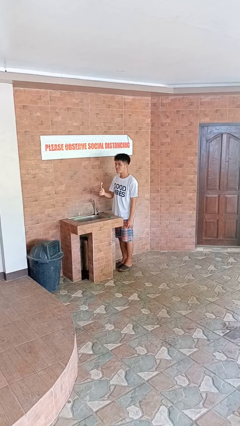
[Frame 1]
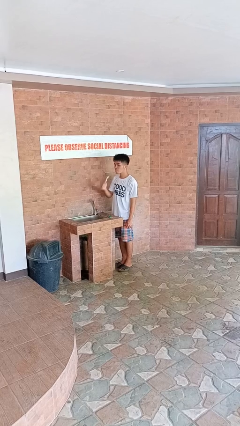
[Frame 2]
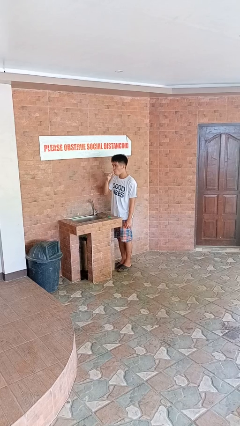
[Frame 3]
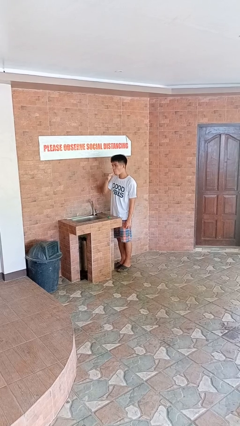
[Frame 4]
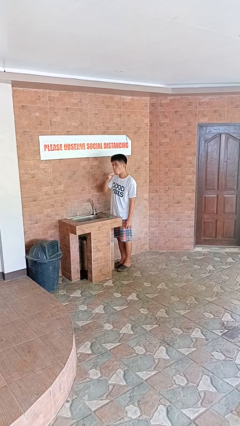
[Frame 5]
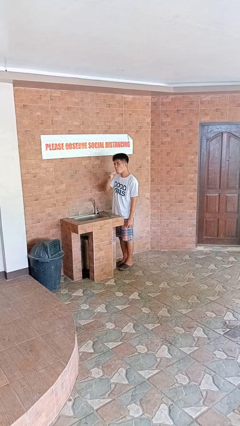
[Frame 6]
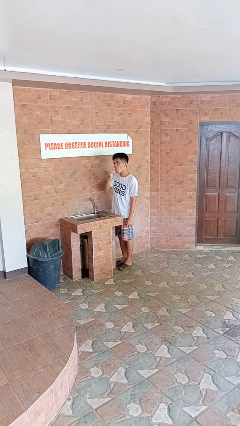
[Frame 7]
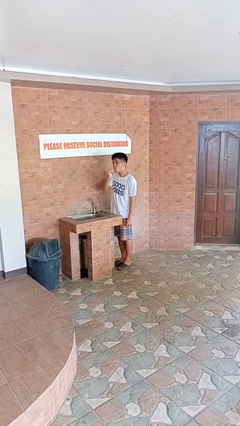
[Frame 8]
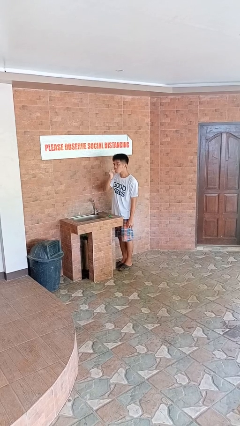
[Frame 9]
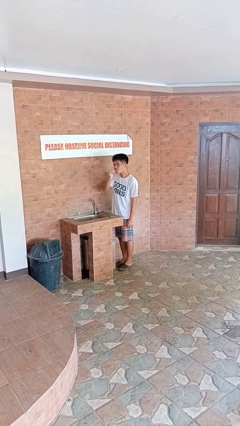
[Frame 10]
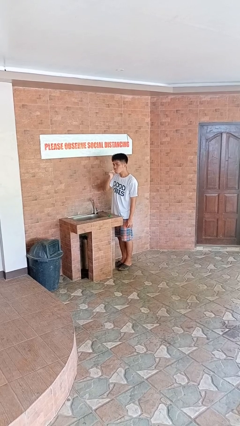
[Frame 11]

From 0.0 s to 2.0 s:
person brushes teeth

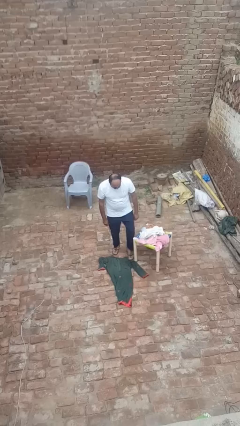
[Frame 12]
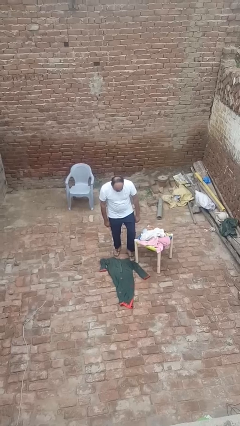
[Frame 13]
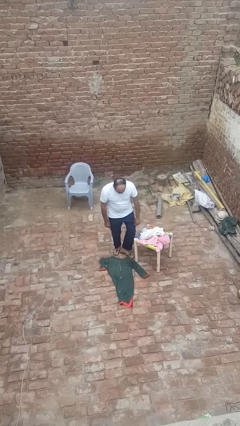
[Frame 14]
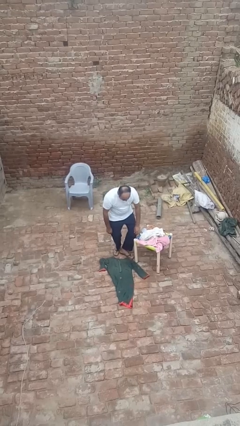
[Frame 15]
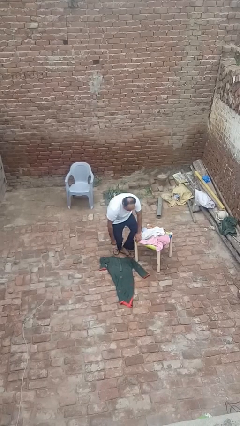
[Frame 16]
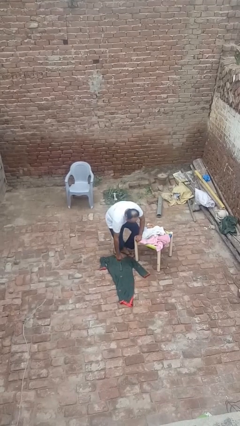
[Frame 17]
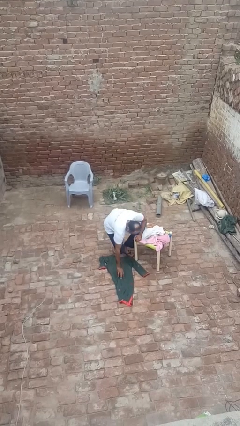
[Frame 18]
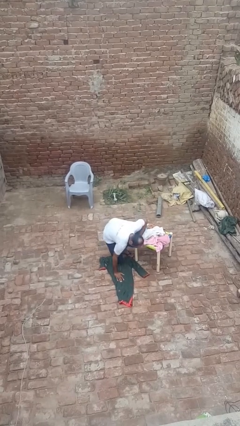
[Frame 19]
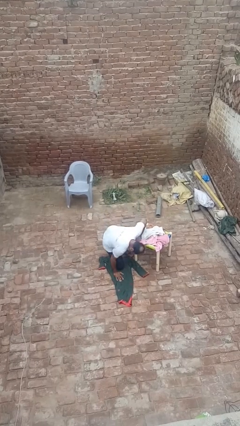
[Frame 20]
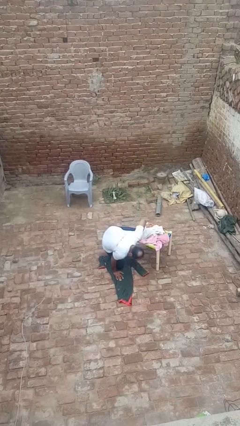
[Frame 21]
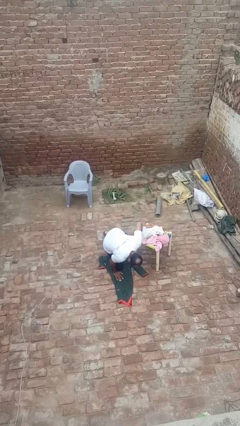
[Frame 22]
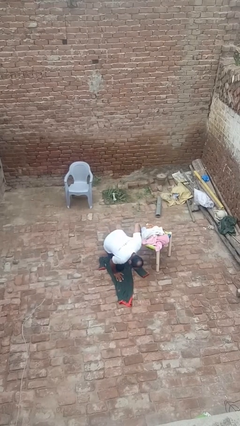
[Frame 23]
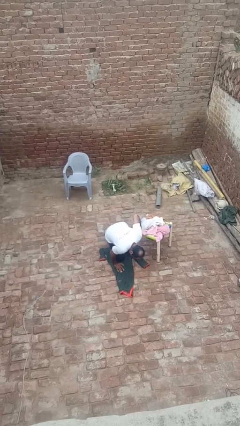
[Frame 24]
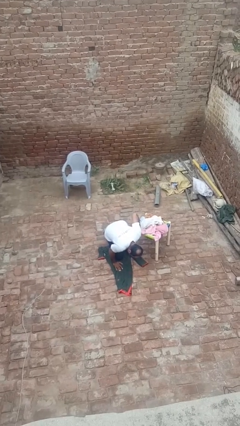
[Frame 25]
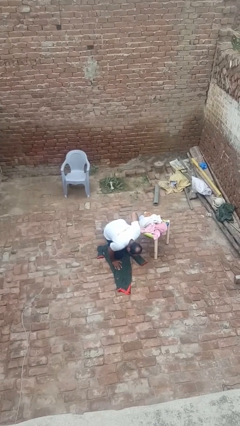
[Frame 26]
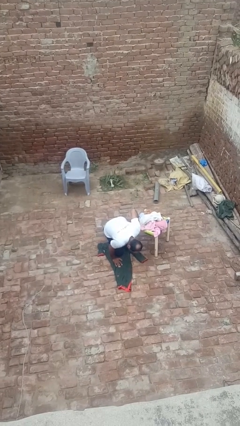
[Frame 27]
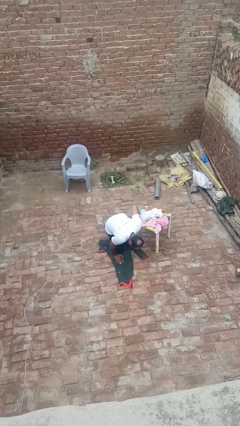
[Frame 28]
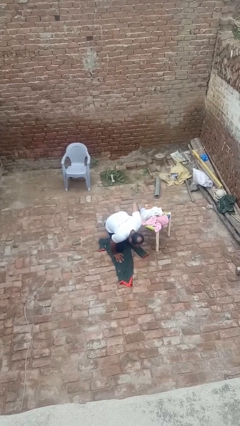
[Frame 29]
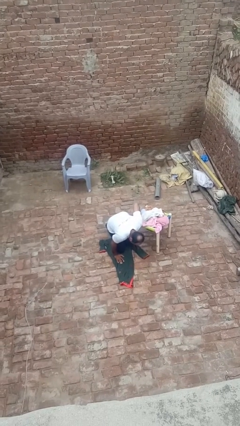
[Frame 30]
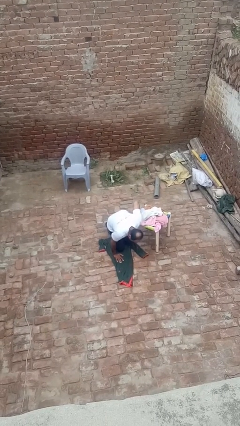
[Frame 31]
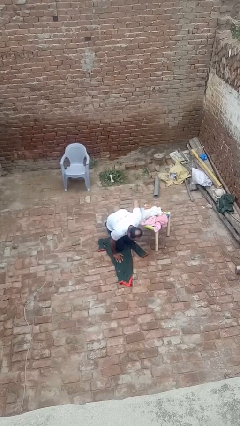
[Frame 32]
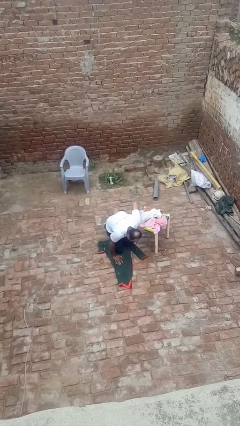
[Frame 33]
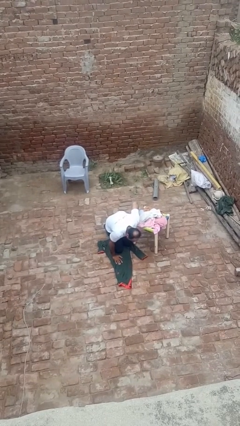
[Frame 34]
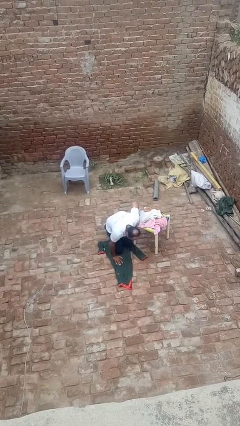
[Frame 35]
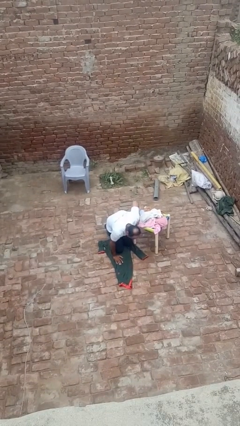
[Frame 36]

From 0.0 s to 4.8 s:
person lies down on floor

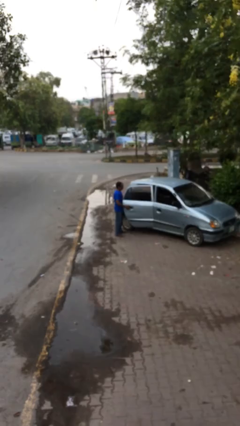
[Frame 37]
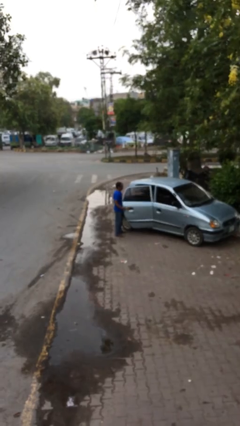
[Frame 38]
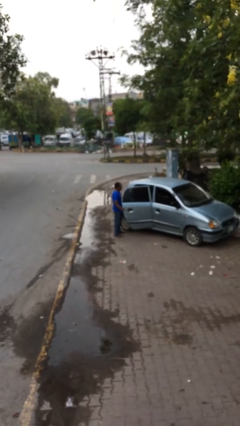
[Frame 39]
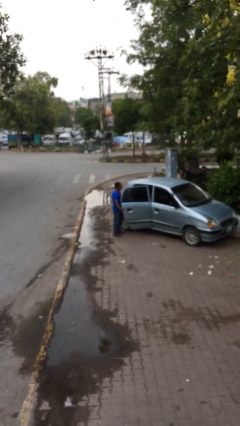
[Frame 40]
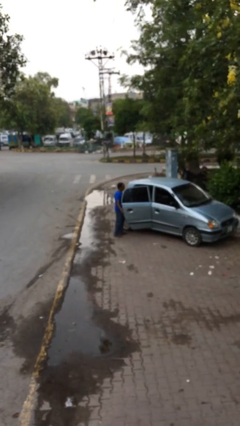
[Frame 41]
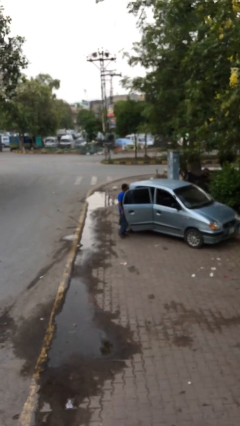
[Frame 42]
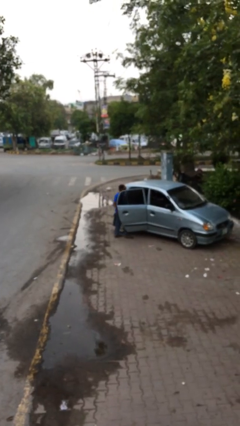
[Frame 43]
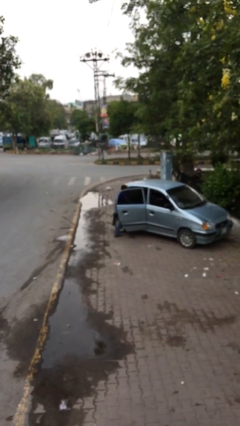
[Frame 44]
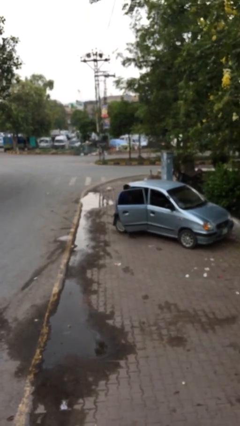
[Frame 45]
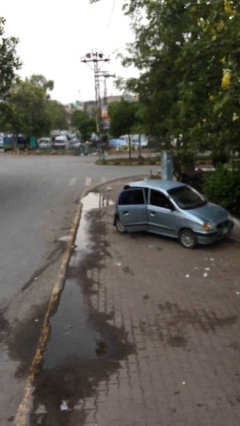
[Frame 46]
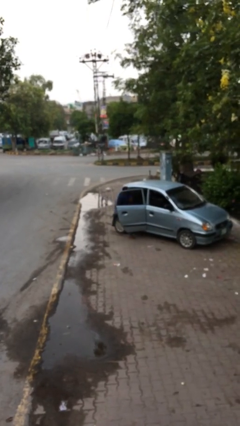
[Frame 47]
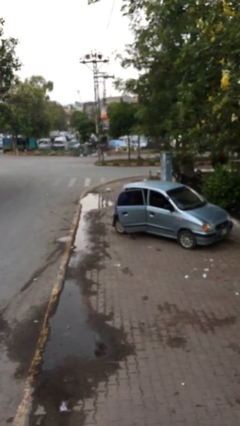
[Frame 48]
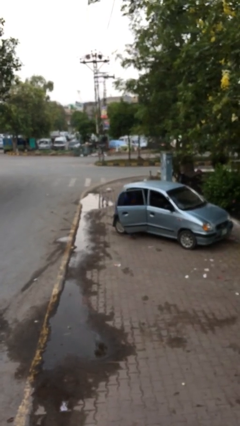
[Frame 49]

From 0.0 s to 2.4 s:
person enters car

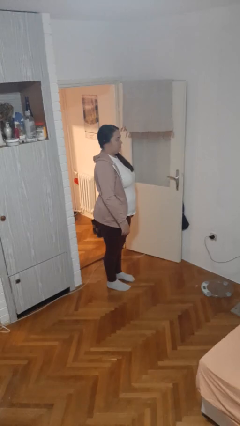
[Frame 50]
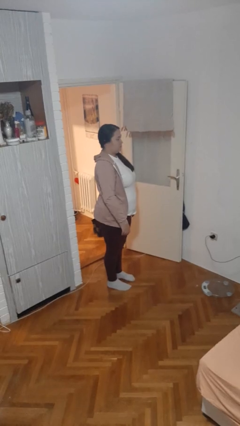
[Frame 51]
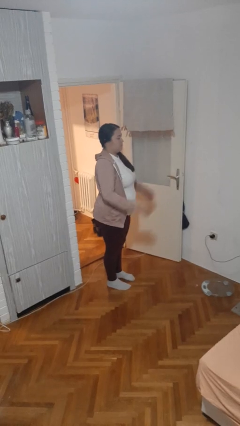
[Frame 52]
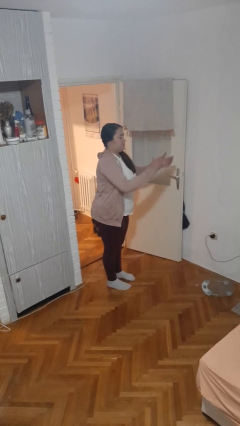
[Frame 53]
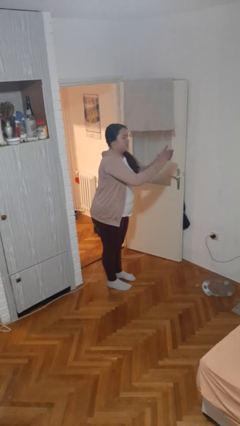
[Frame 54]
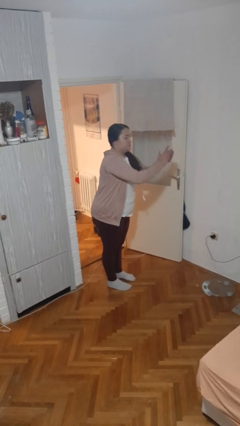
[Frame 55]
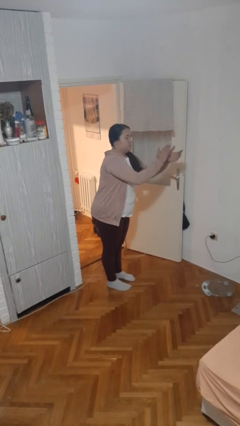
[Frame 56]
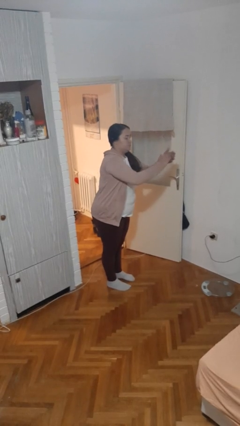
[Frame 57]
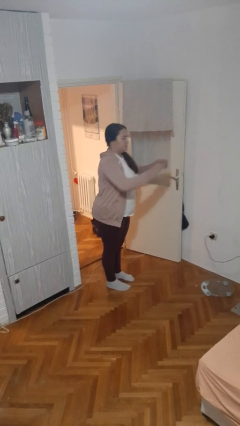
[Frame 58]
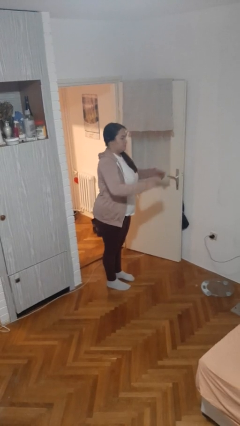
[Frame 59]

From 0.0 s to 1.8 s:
person claps hands

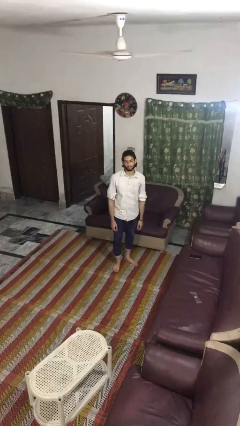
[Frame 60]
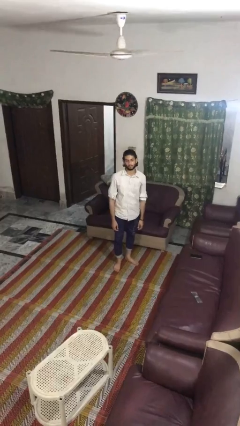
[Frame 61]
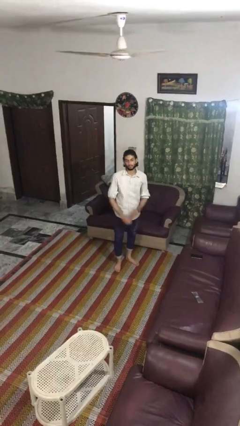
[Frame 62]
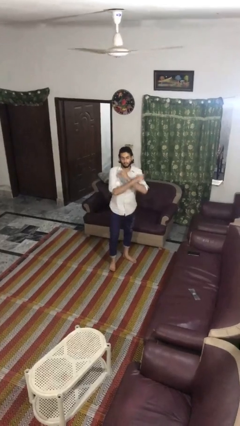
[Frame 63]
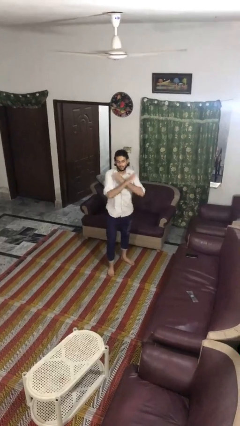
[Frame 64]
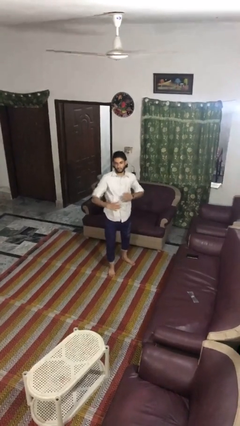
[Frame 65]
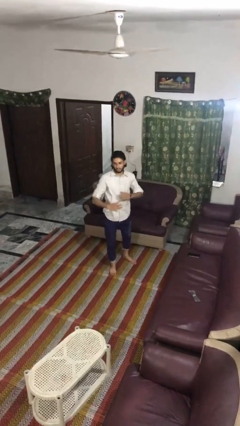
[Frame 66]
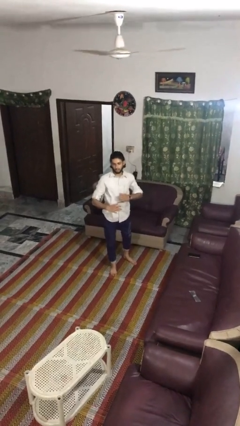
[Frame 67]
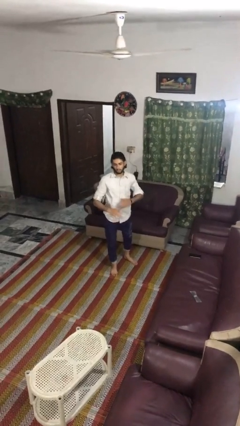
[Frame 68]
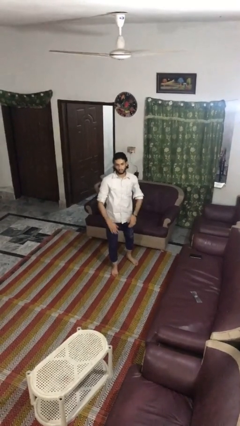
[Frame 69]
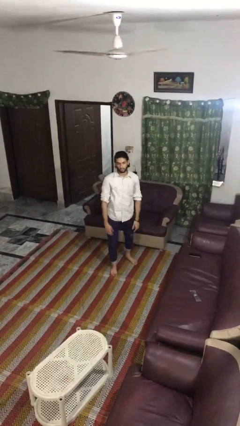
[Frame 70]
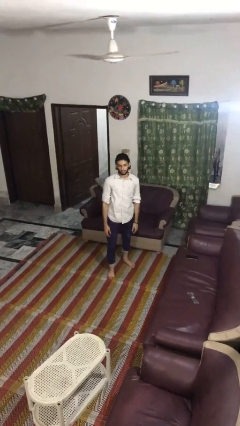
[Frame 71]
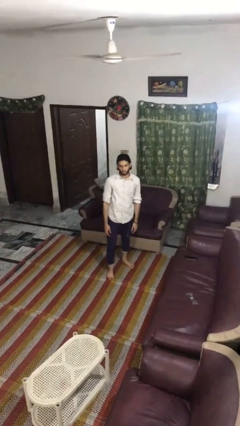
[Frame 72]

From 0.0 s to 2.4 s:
person karate chop

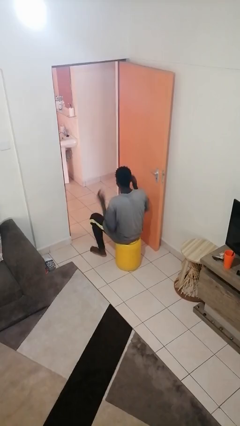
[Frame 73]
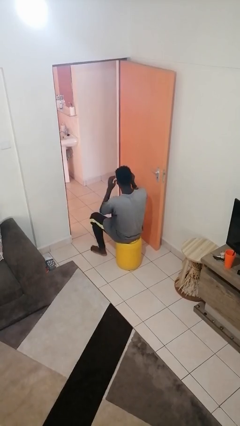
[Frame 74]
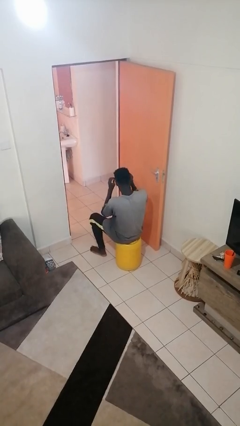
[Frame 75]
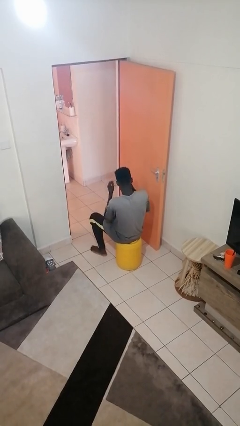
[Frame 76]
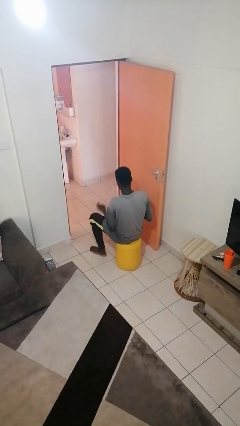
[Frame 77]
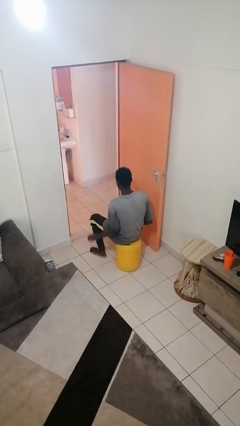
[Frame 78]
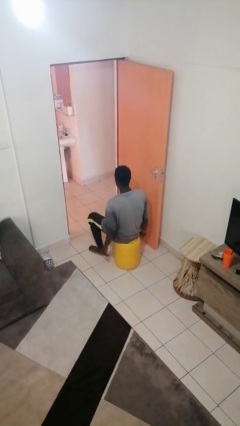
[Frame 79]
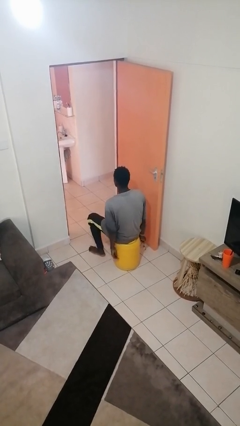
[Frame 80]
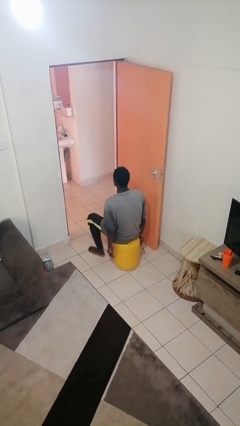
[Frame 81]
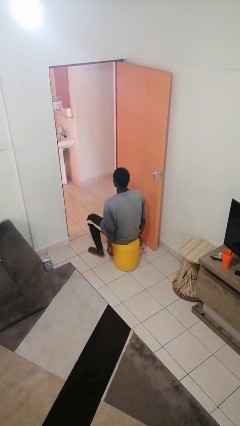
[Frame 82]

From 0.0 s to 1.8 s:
person takes off glasses

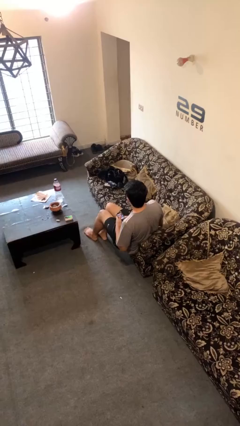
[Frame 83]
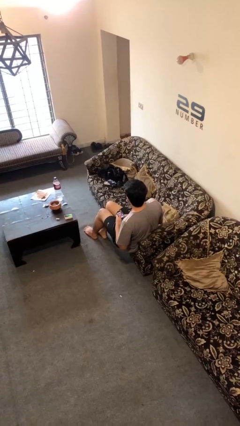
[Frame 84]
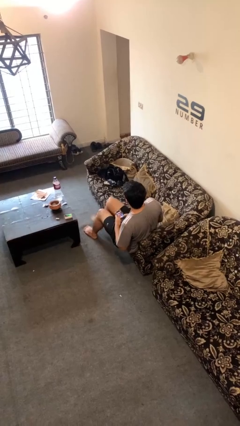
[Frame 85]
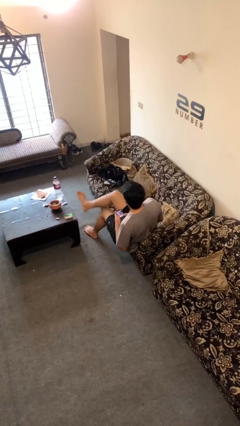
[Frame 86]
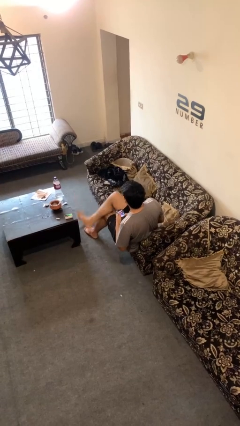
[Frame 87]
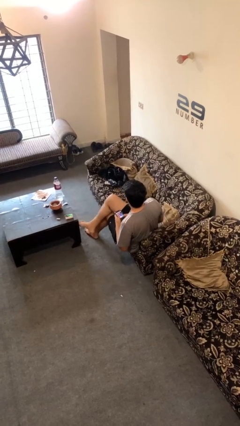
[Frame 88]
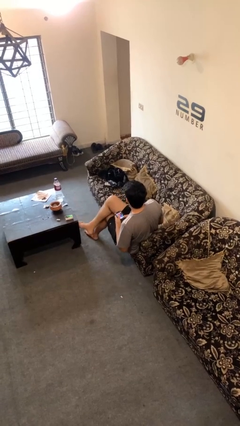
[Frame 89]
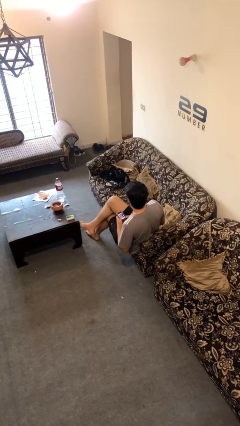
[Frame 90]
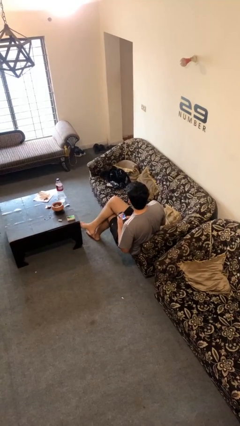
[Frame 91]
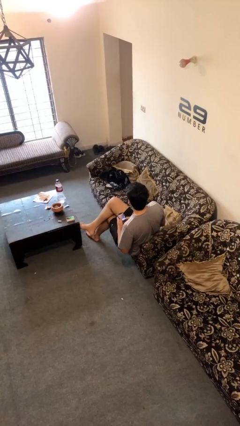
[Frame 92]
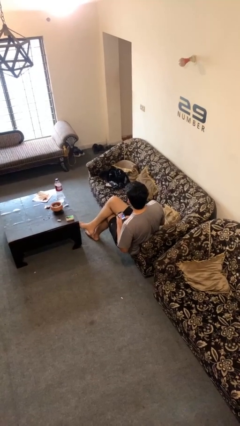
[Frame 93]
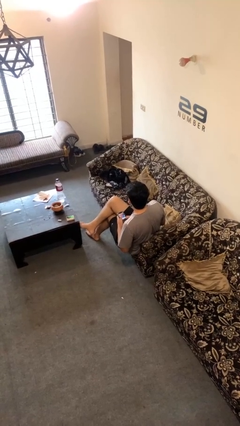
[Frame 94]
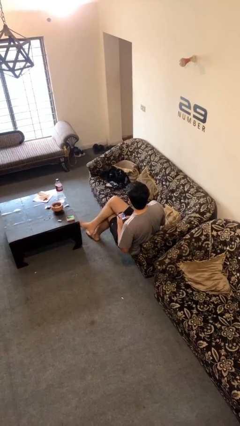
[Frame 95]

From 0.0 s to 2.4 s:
person crosses legs
